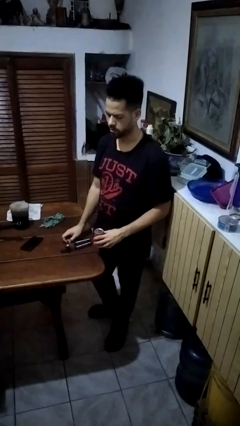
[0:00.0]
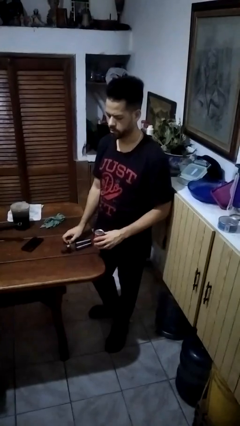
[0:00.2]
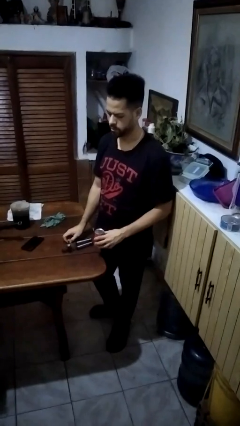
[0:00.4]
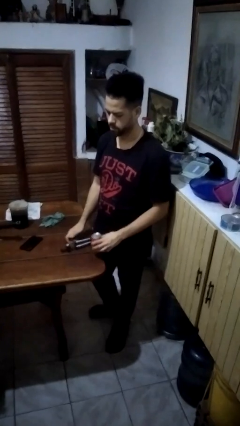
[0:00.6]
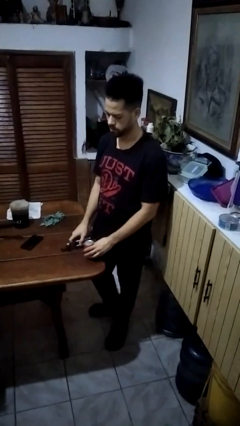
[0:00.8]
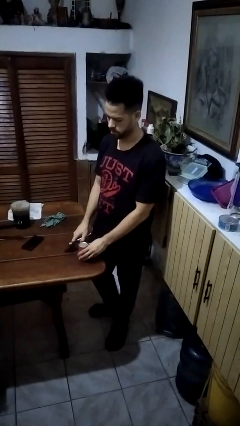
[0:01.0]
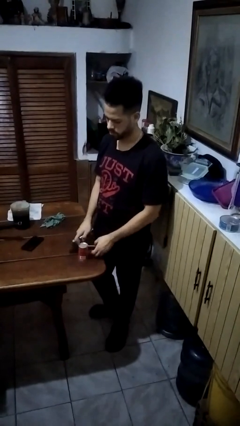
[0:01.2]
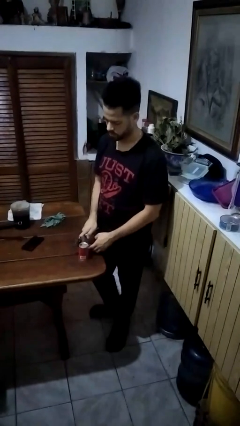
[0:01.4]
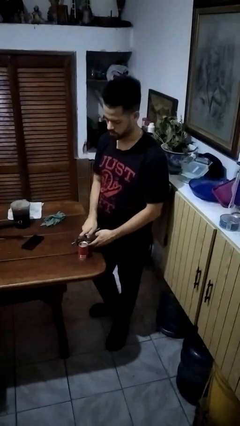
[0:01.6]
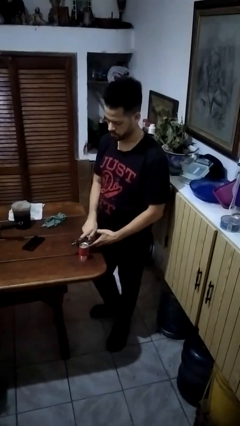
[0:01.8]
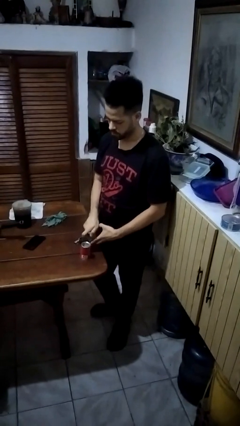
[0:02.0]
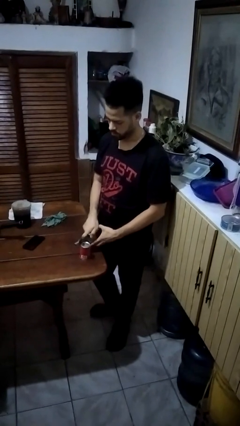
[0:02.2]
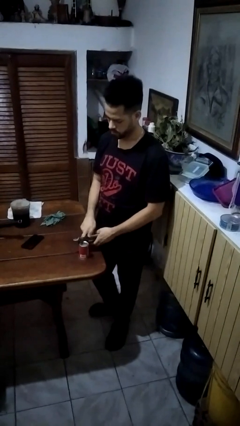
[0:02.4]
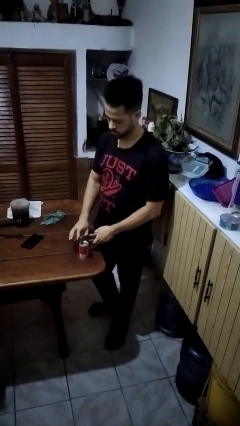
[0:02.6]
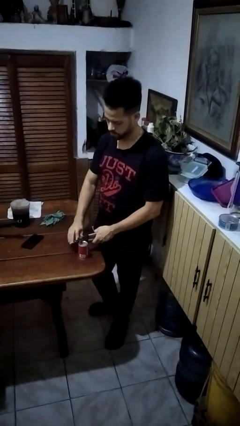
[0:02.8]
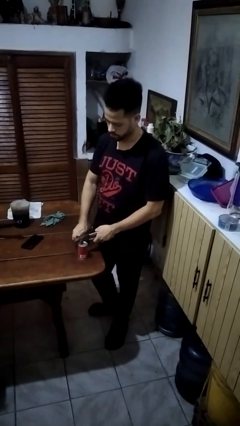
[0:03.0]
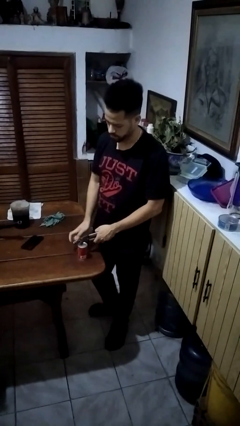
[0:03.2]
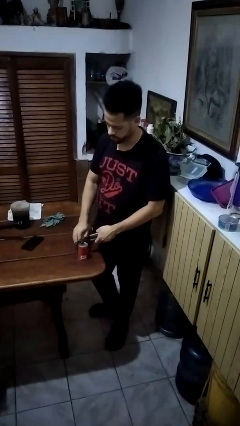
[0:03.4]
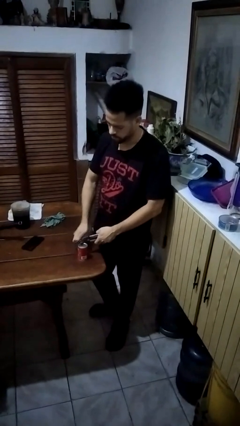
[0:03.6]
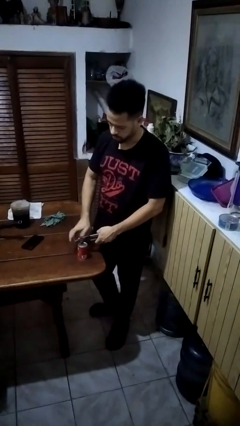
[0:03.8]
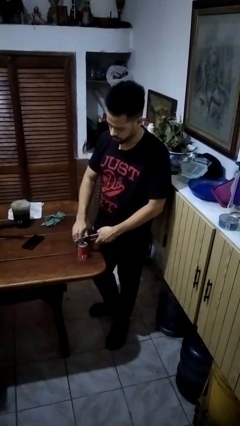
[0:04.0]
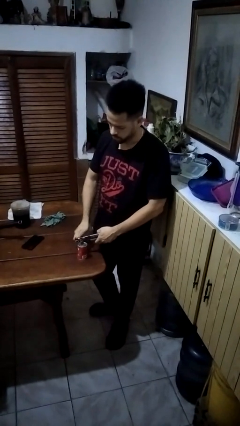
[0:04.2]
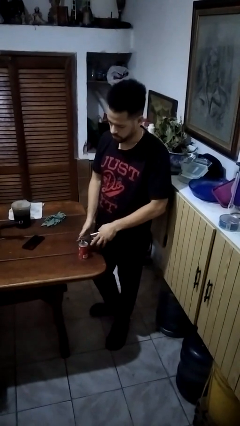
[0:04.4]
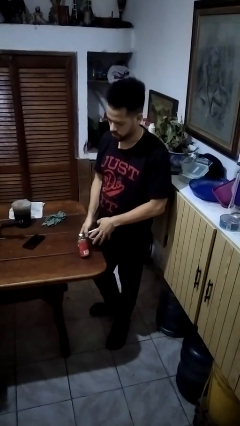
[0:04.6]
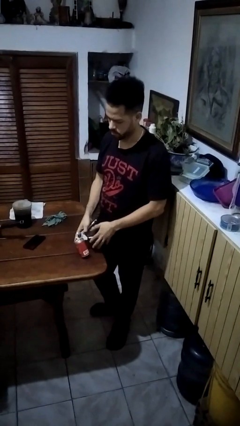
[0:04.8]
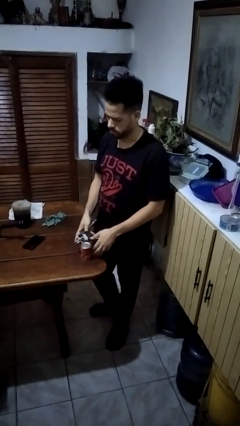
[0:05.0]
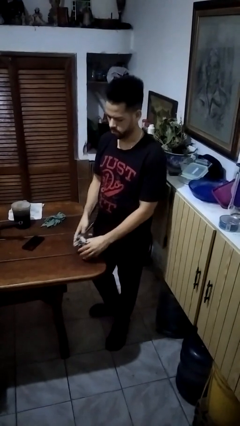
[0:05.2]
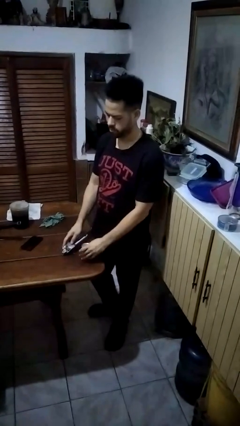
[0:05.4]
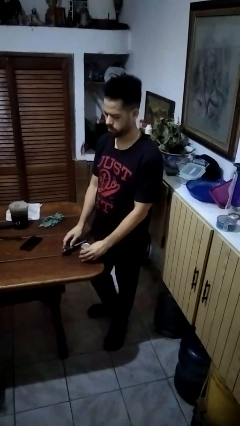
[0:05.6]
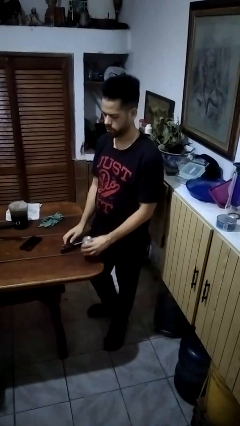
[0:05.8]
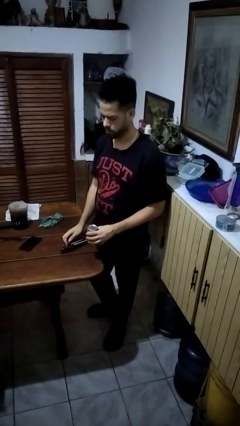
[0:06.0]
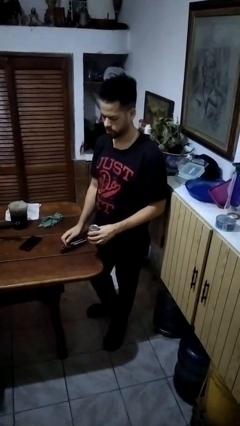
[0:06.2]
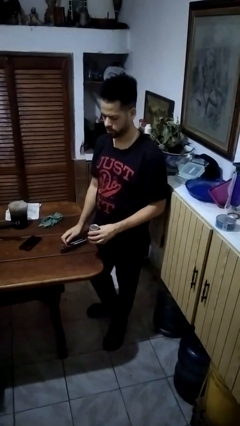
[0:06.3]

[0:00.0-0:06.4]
person opens can with can opener

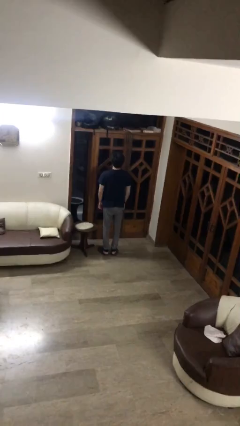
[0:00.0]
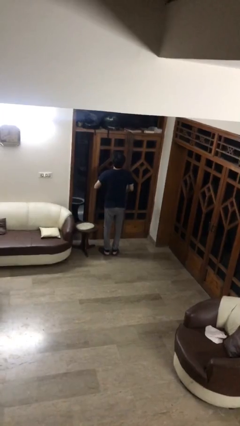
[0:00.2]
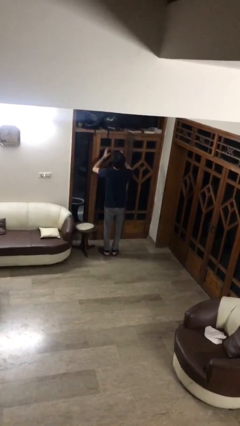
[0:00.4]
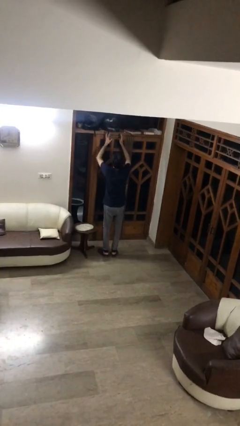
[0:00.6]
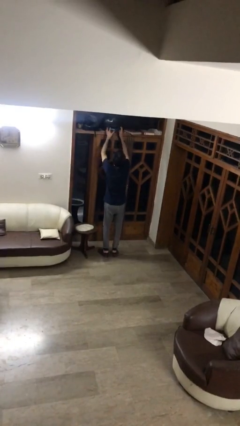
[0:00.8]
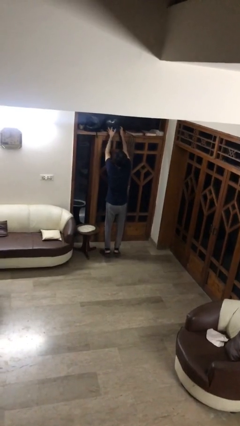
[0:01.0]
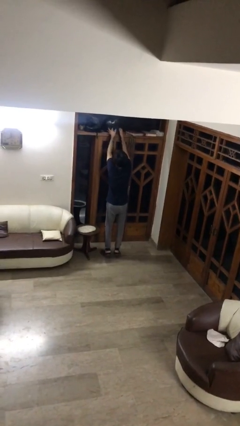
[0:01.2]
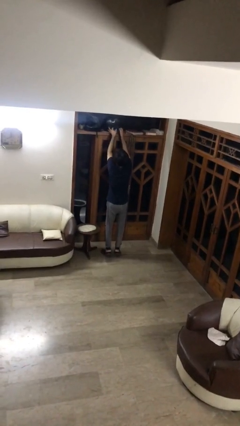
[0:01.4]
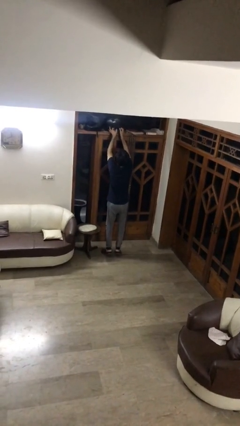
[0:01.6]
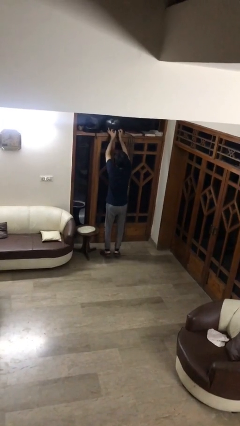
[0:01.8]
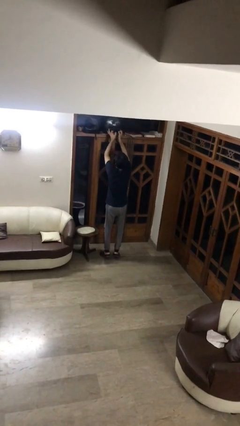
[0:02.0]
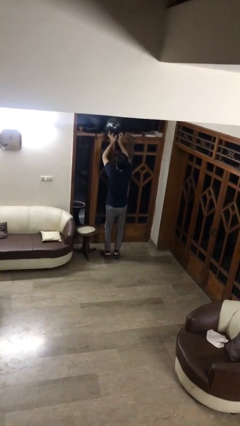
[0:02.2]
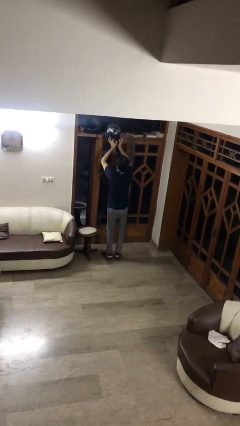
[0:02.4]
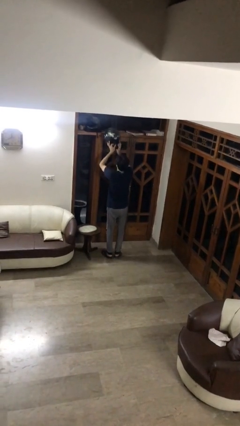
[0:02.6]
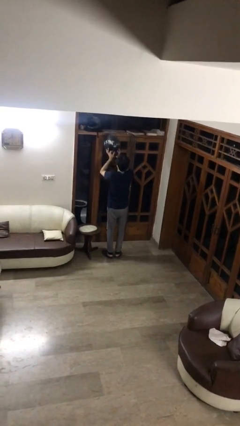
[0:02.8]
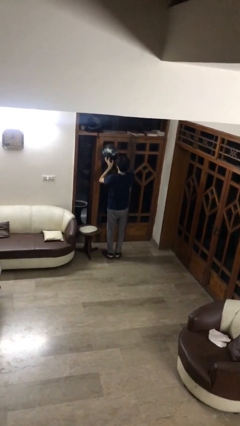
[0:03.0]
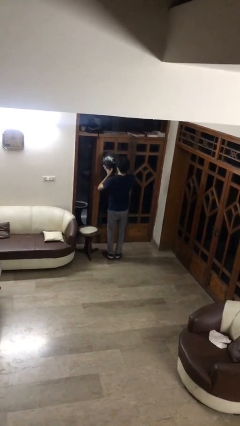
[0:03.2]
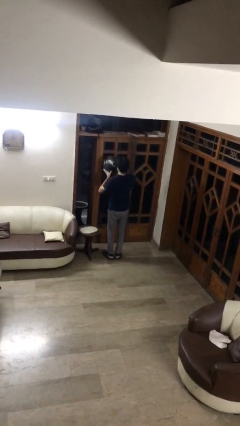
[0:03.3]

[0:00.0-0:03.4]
person picks up object from shelf
